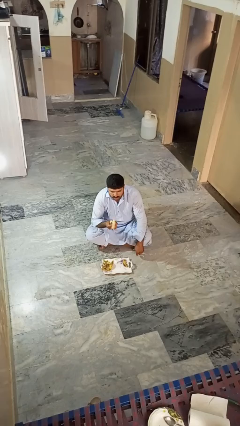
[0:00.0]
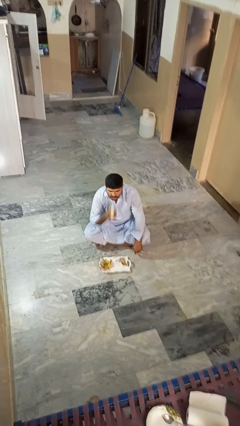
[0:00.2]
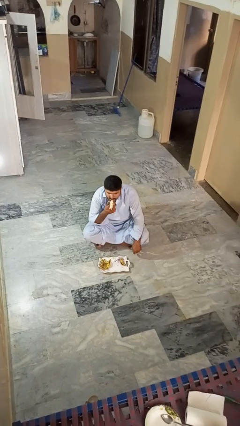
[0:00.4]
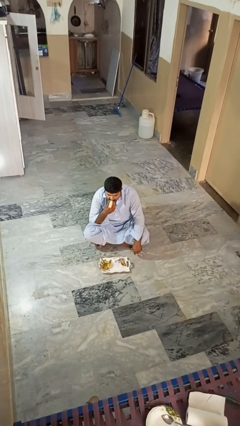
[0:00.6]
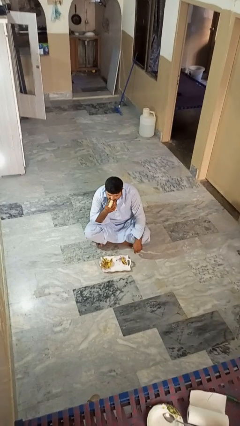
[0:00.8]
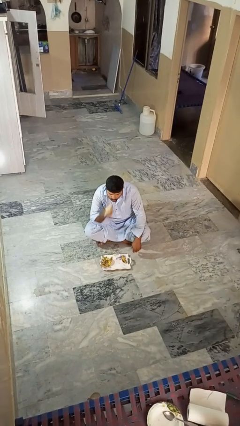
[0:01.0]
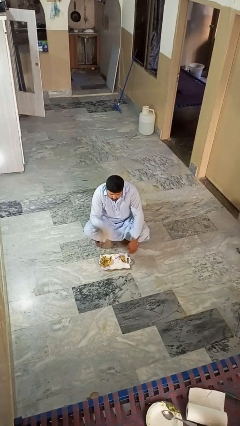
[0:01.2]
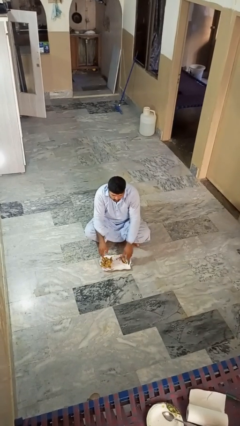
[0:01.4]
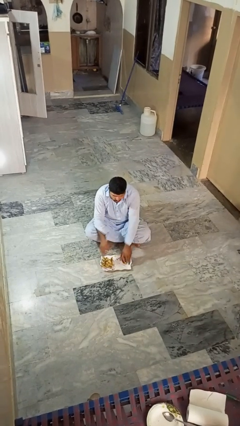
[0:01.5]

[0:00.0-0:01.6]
person eats banana

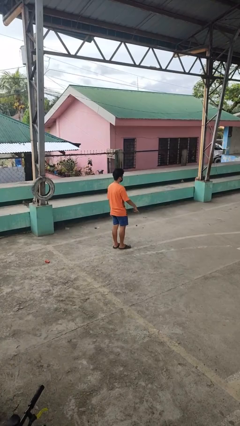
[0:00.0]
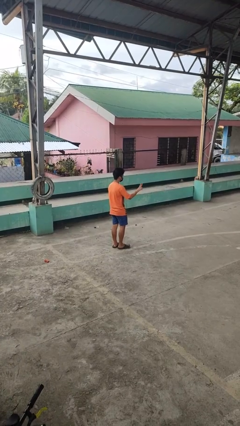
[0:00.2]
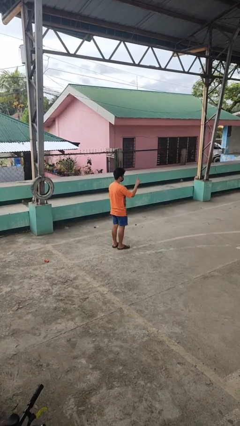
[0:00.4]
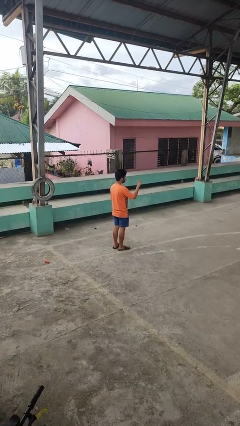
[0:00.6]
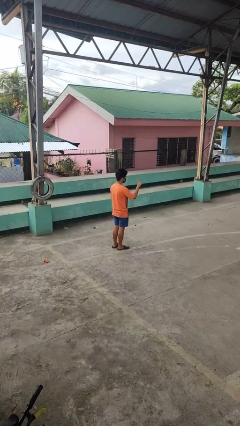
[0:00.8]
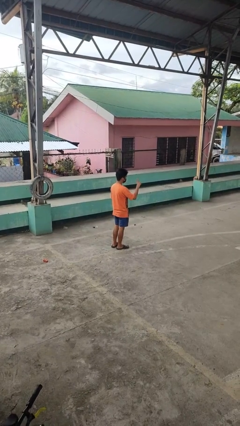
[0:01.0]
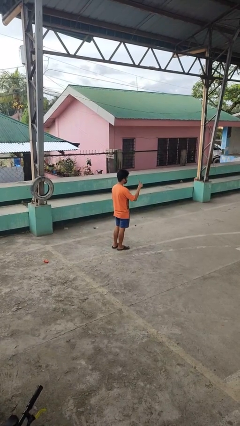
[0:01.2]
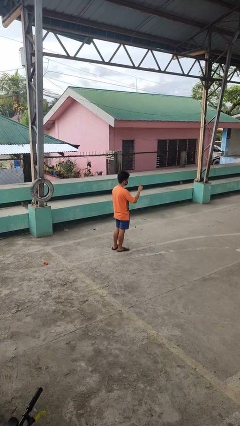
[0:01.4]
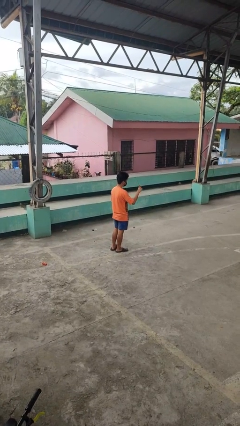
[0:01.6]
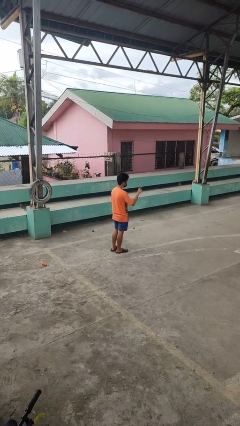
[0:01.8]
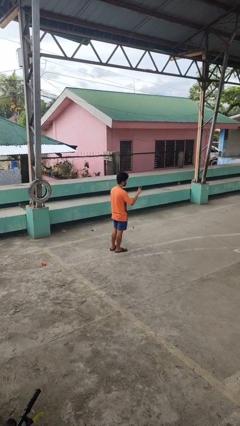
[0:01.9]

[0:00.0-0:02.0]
person gestures peace

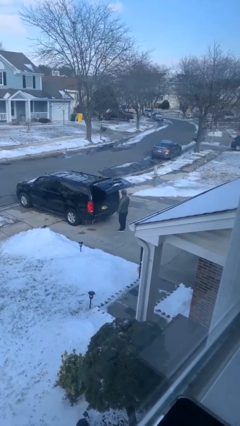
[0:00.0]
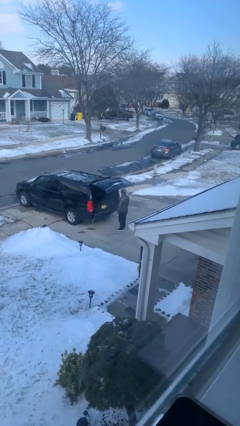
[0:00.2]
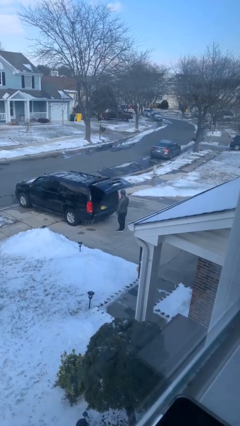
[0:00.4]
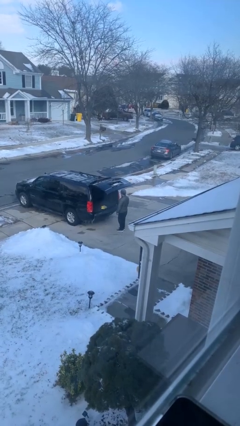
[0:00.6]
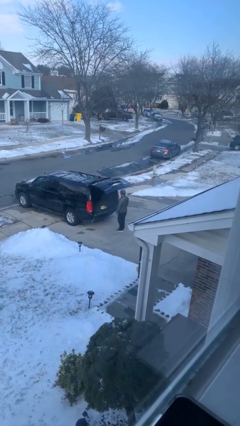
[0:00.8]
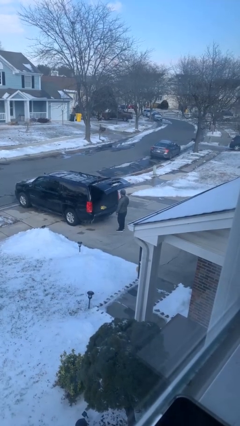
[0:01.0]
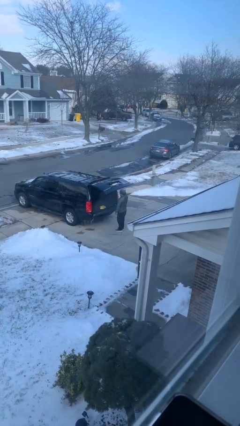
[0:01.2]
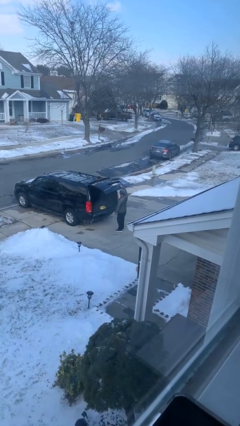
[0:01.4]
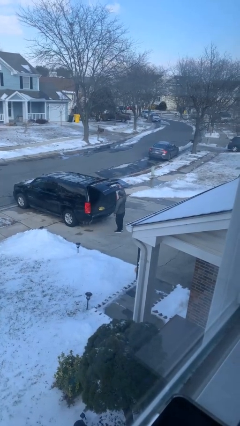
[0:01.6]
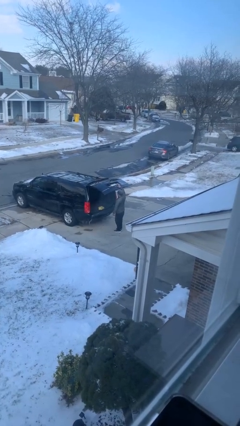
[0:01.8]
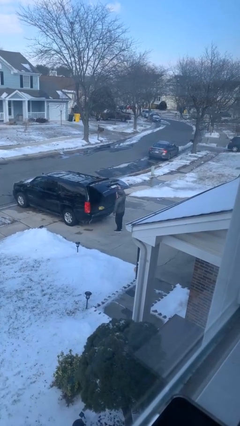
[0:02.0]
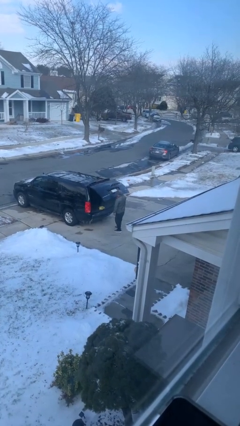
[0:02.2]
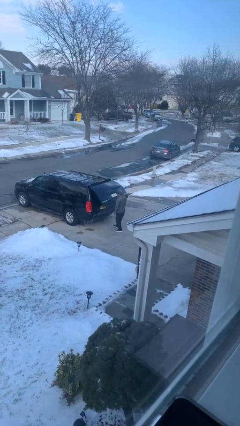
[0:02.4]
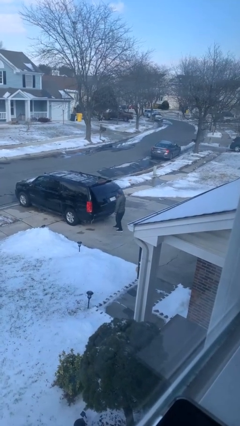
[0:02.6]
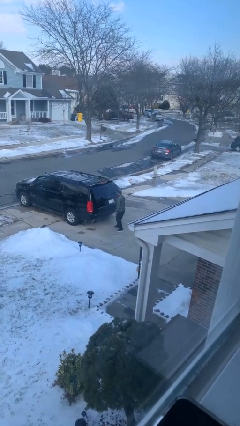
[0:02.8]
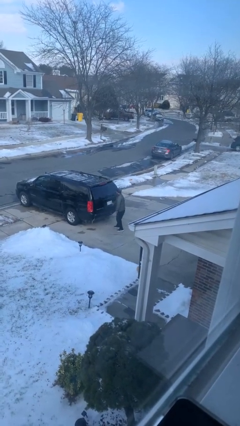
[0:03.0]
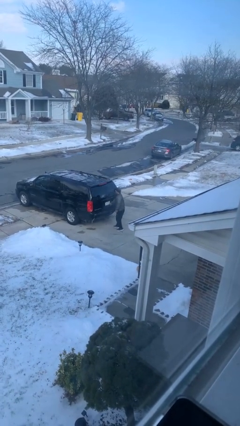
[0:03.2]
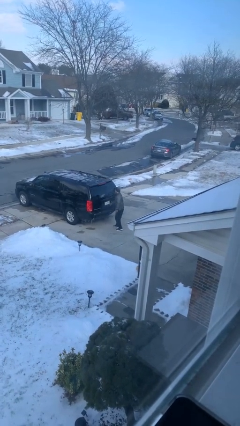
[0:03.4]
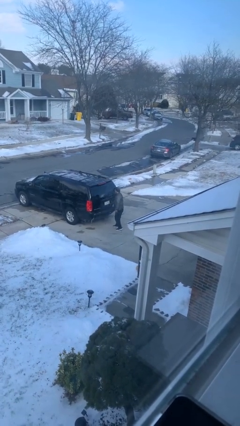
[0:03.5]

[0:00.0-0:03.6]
person closes car trunk

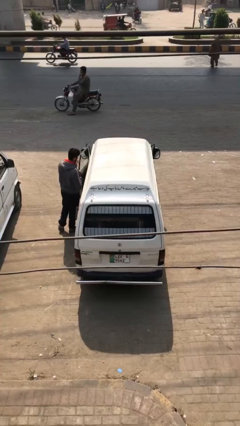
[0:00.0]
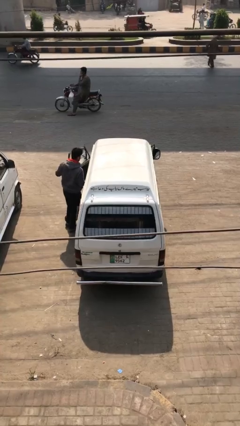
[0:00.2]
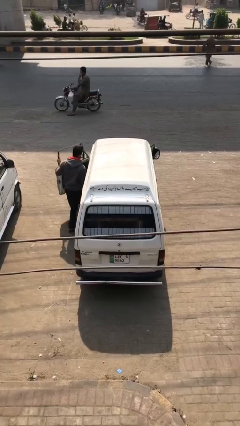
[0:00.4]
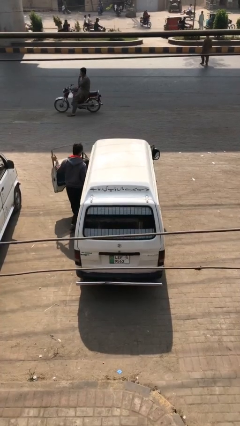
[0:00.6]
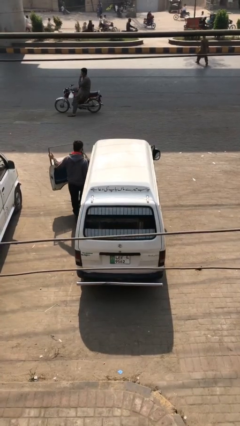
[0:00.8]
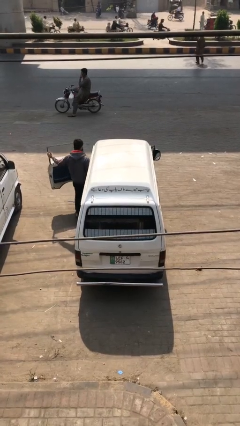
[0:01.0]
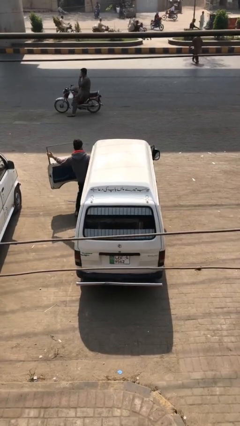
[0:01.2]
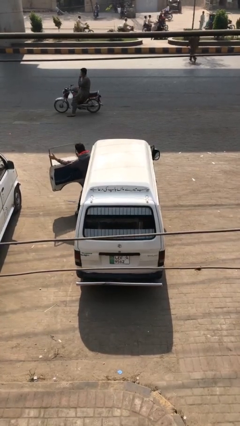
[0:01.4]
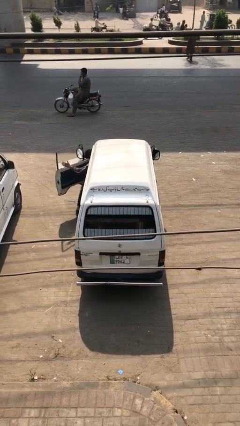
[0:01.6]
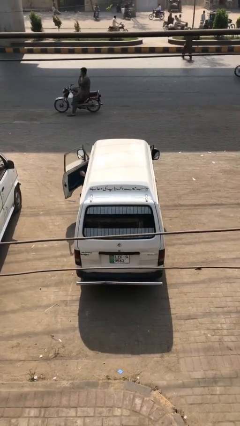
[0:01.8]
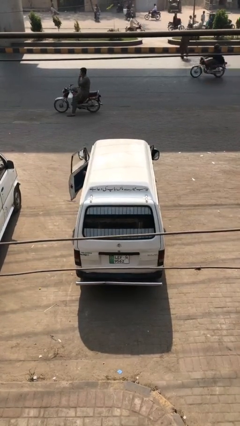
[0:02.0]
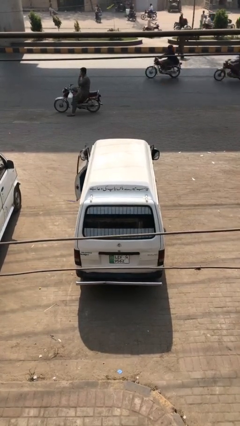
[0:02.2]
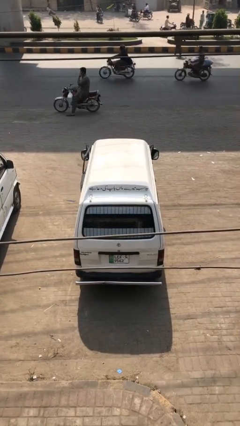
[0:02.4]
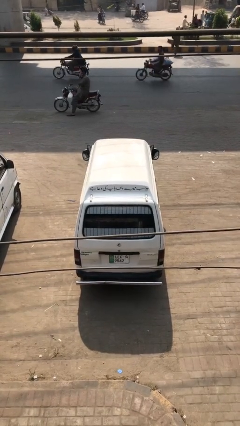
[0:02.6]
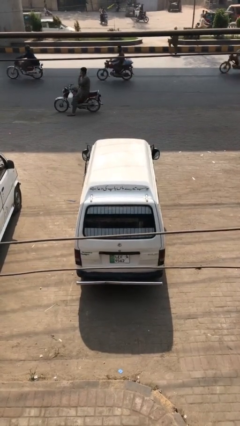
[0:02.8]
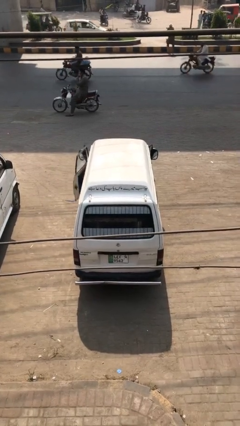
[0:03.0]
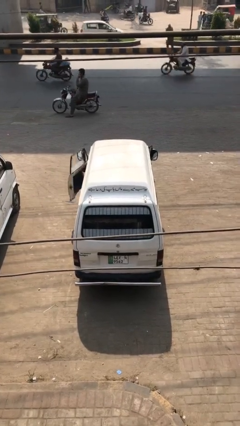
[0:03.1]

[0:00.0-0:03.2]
car picks up person

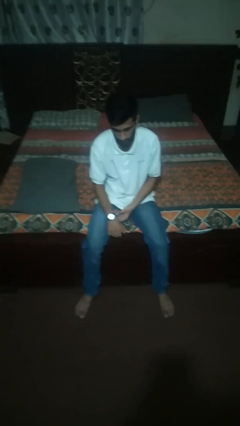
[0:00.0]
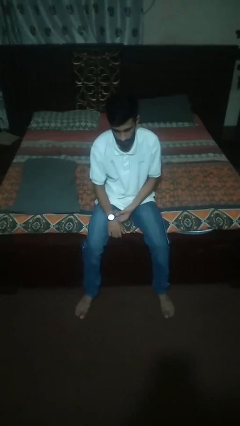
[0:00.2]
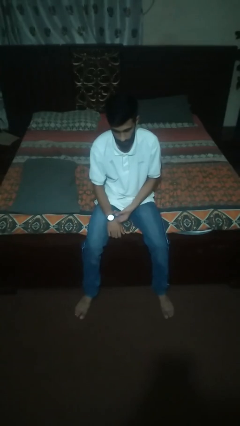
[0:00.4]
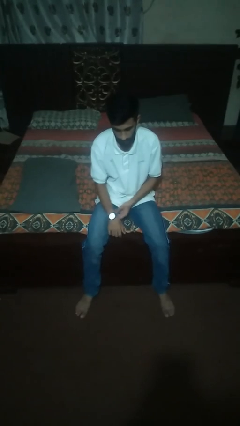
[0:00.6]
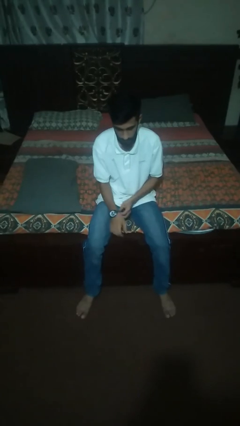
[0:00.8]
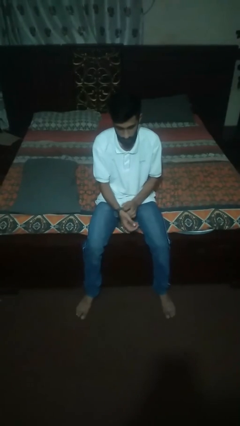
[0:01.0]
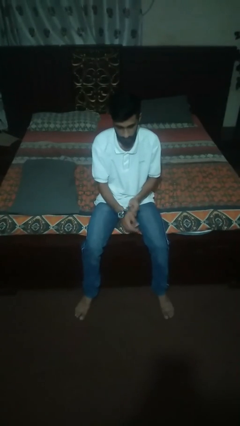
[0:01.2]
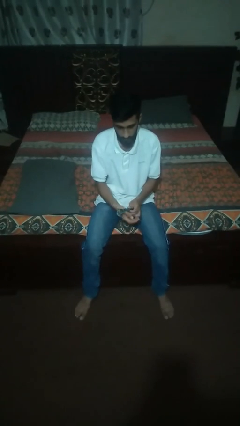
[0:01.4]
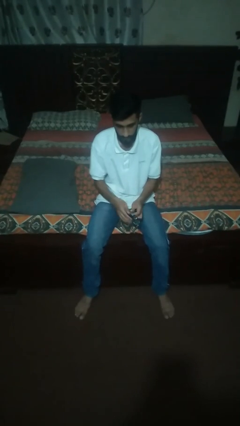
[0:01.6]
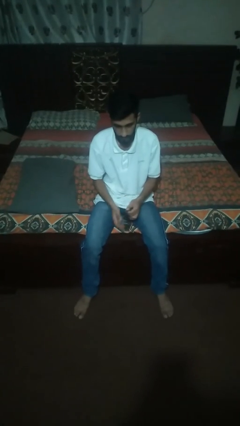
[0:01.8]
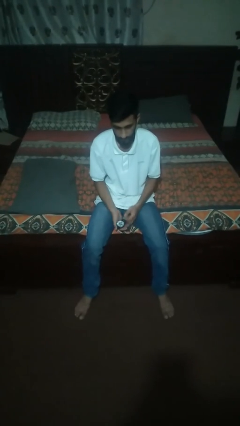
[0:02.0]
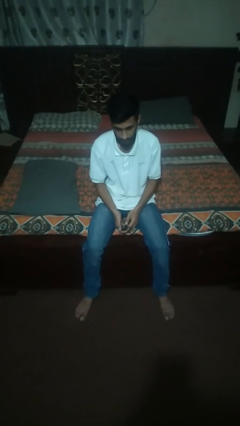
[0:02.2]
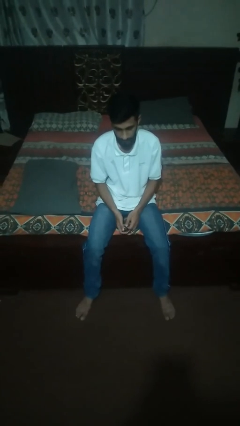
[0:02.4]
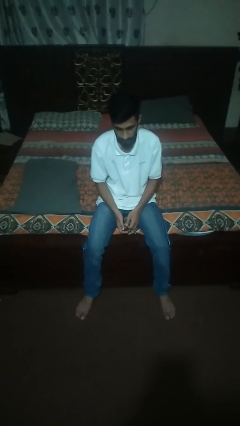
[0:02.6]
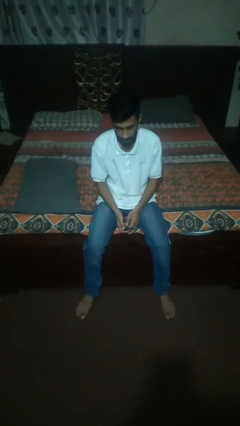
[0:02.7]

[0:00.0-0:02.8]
person takes off wristwatch

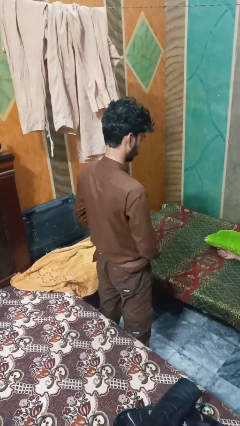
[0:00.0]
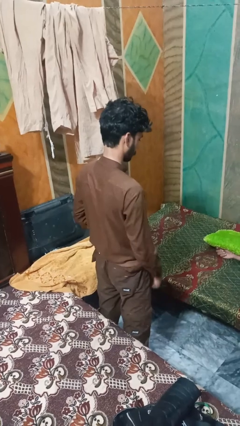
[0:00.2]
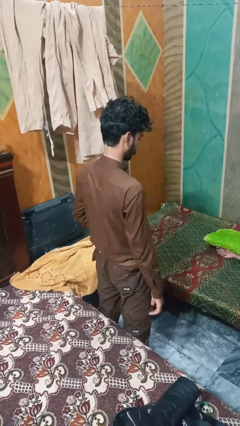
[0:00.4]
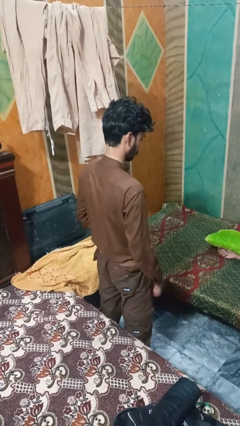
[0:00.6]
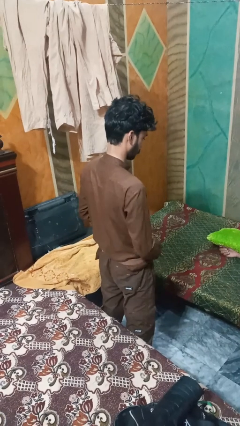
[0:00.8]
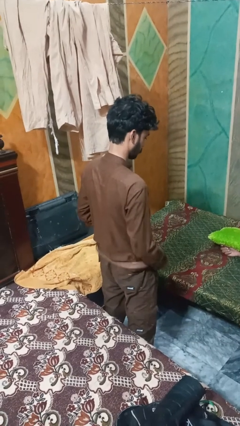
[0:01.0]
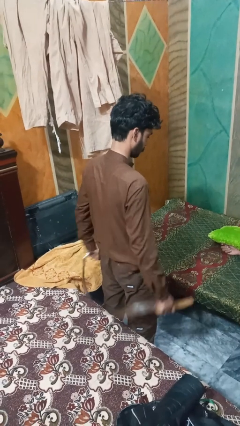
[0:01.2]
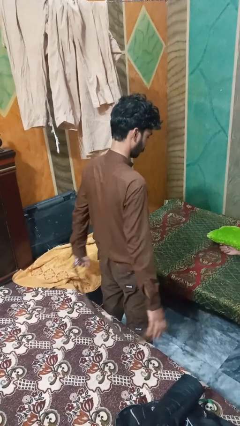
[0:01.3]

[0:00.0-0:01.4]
person takes off belt

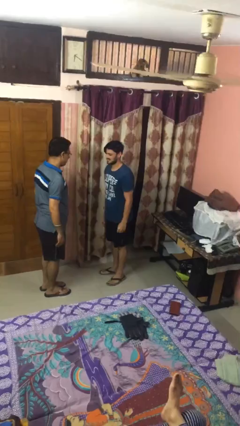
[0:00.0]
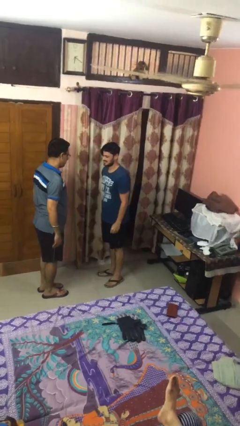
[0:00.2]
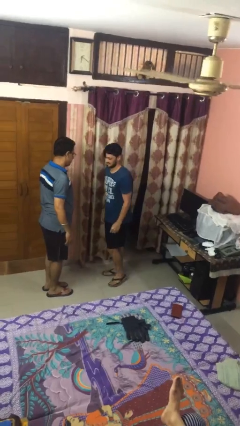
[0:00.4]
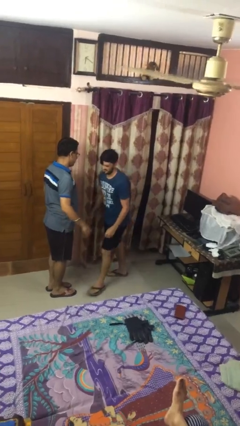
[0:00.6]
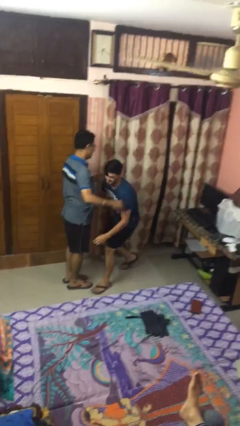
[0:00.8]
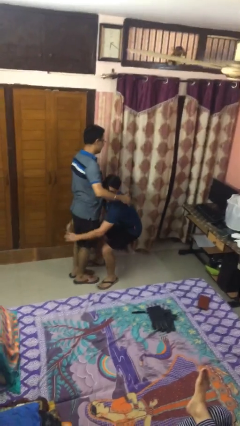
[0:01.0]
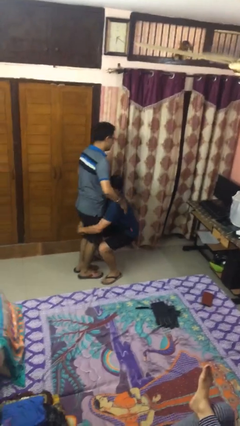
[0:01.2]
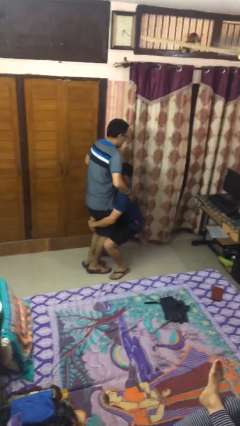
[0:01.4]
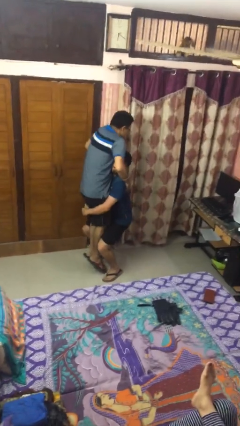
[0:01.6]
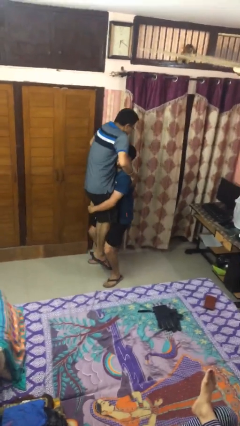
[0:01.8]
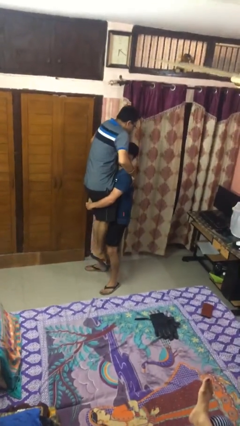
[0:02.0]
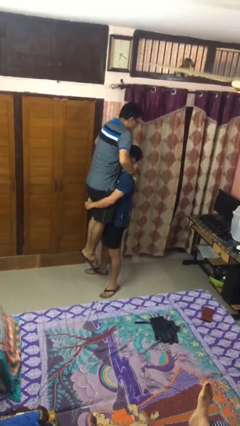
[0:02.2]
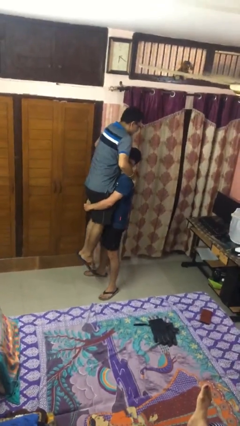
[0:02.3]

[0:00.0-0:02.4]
person picks up person
